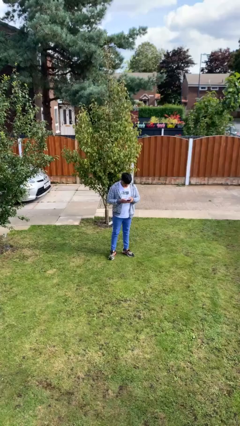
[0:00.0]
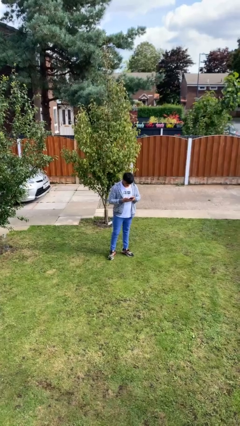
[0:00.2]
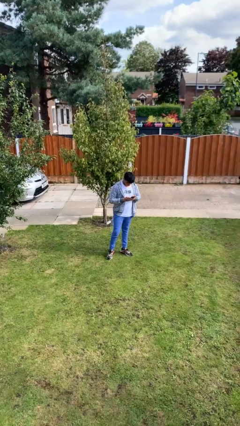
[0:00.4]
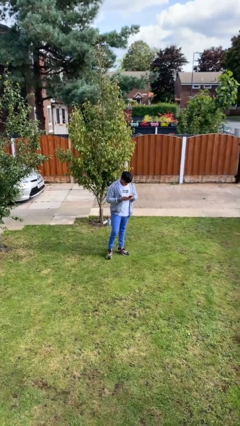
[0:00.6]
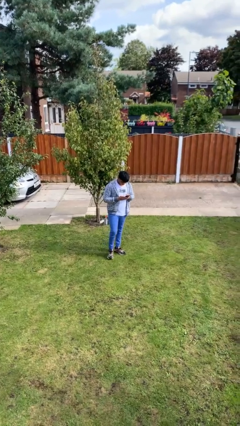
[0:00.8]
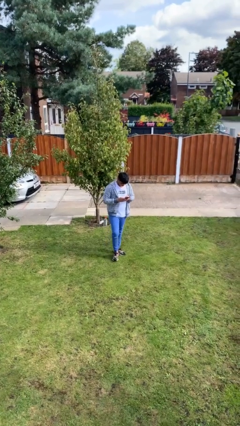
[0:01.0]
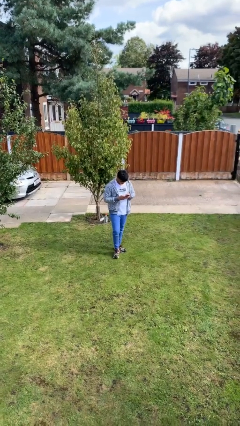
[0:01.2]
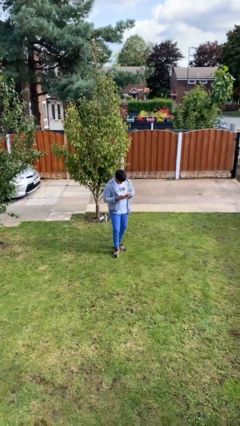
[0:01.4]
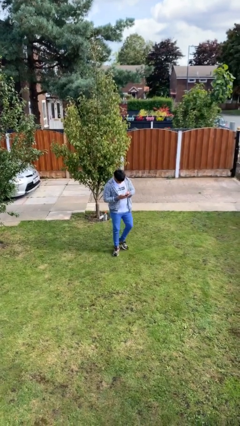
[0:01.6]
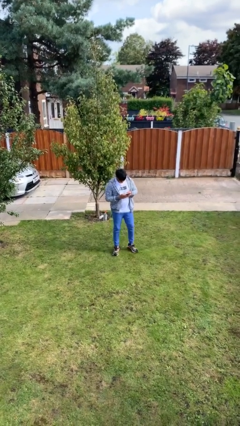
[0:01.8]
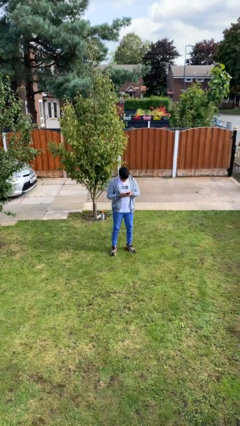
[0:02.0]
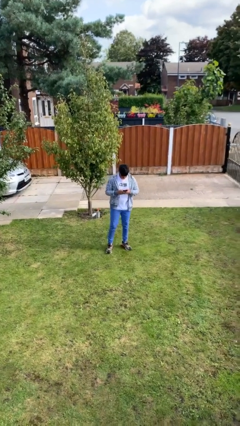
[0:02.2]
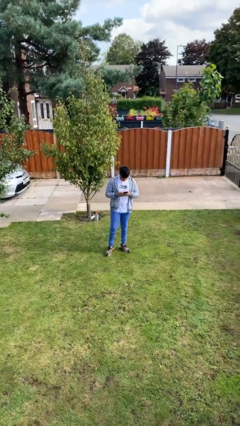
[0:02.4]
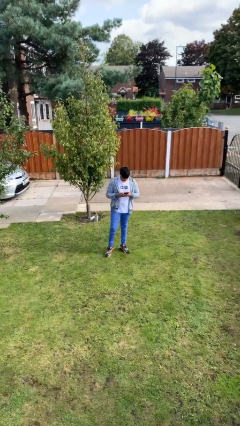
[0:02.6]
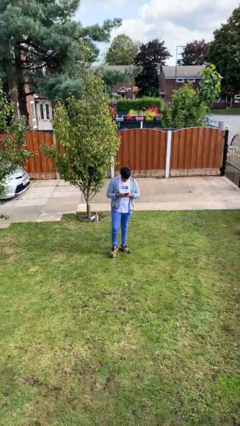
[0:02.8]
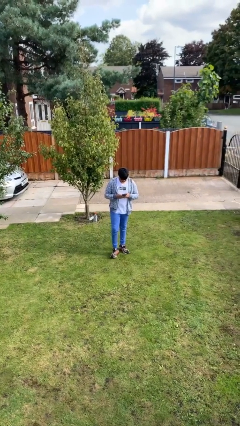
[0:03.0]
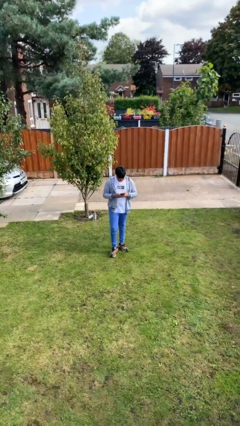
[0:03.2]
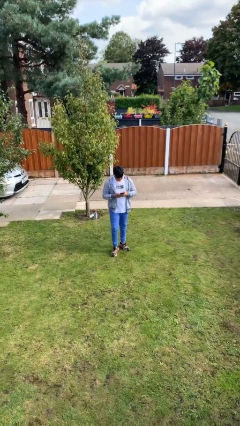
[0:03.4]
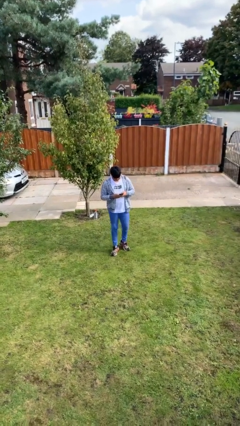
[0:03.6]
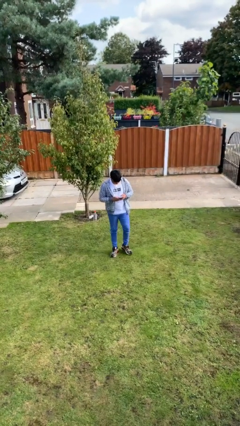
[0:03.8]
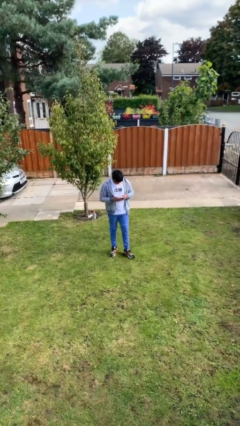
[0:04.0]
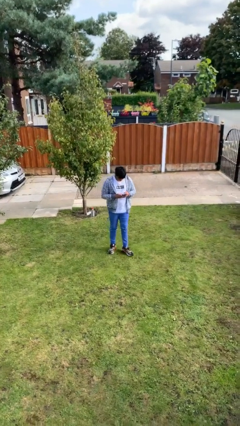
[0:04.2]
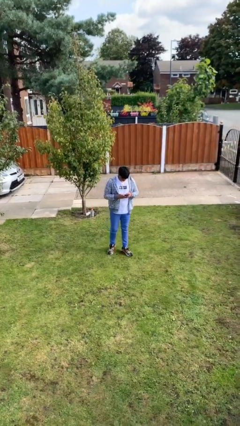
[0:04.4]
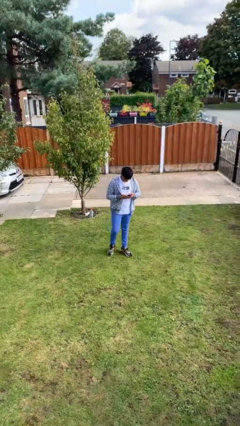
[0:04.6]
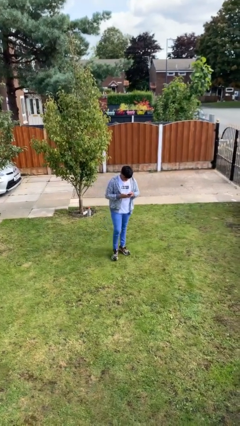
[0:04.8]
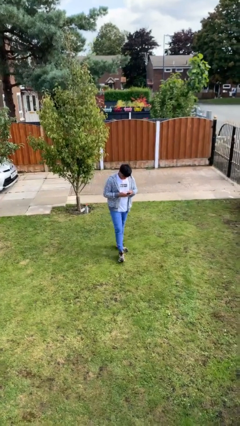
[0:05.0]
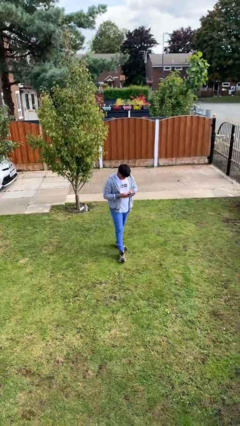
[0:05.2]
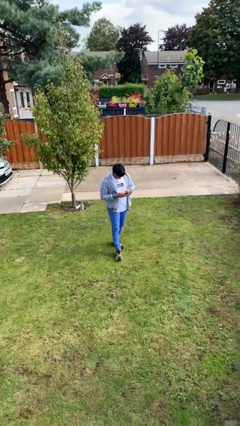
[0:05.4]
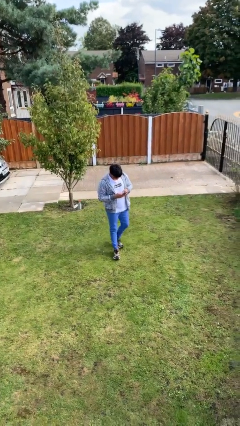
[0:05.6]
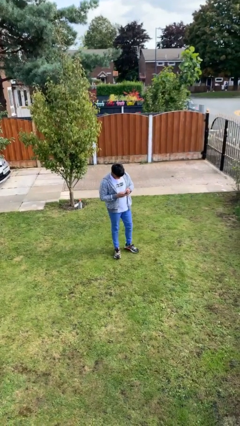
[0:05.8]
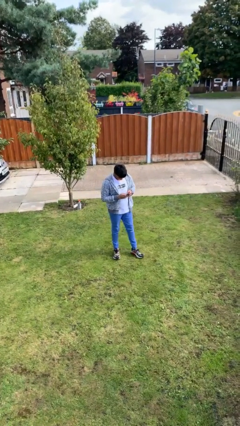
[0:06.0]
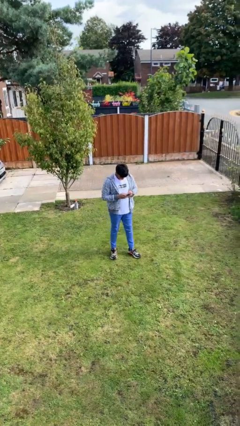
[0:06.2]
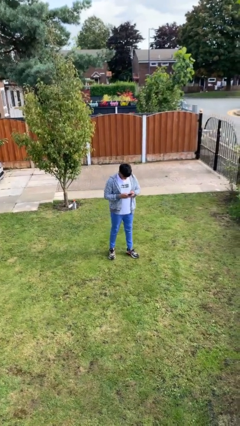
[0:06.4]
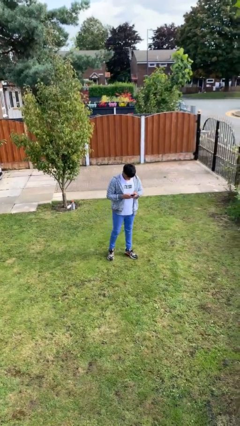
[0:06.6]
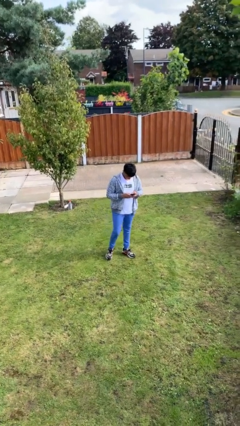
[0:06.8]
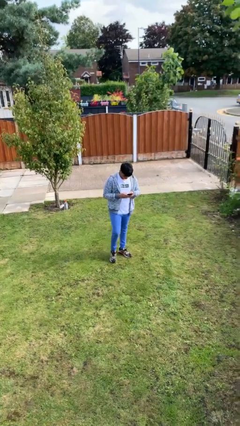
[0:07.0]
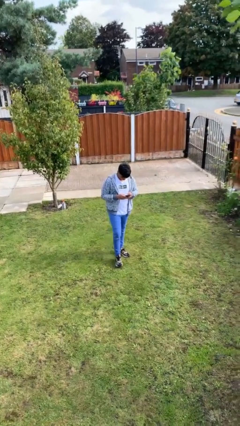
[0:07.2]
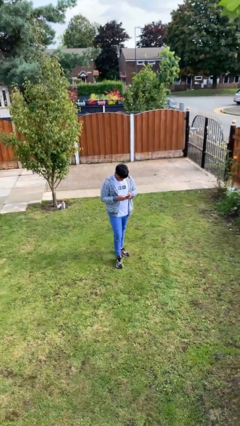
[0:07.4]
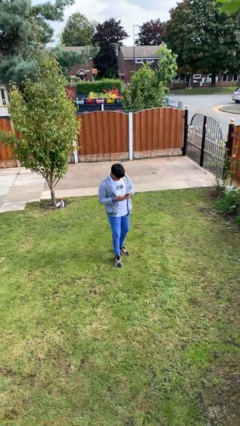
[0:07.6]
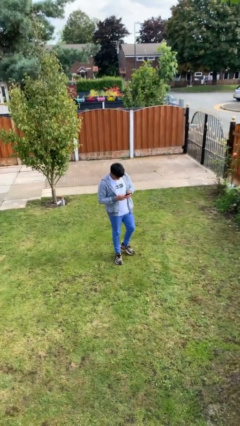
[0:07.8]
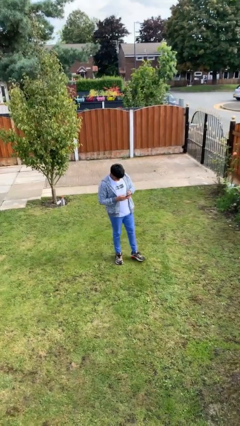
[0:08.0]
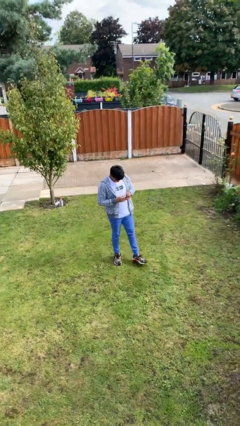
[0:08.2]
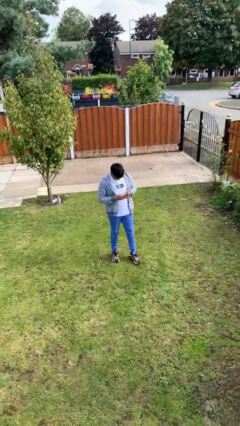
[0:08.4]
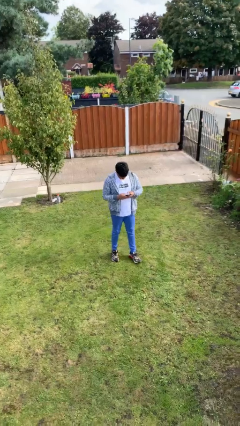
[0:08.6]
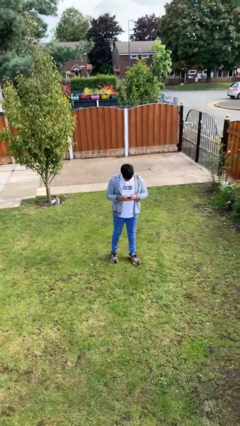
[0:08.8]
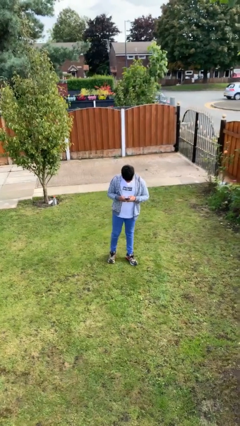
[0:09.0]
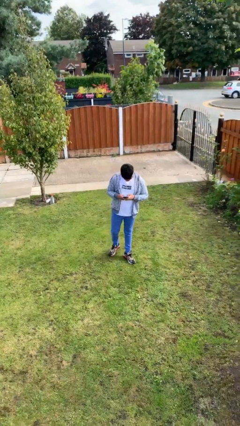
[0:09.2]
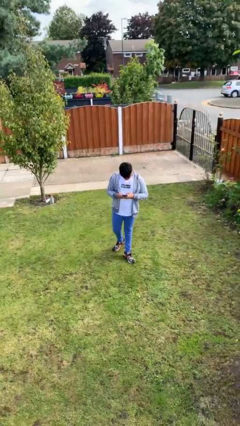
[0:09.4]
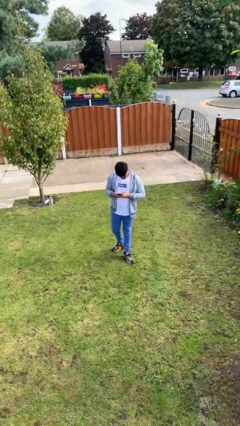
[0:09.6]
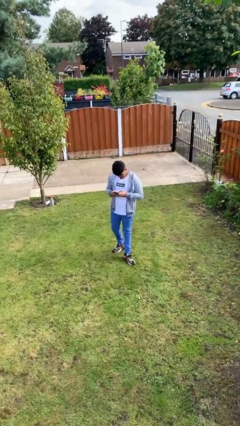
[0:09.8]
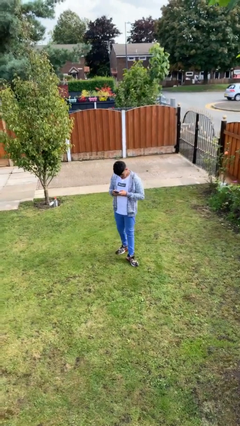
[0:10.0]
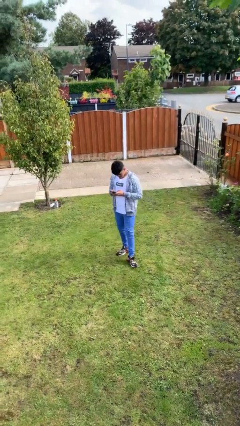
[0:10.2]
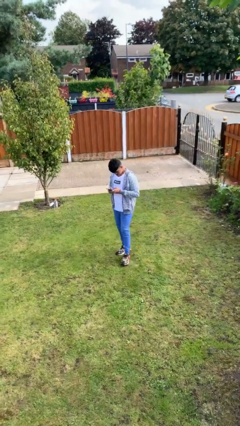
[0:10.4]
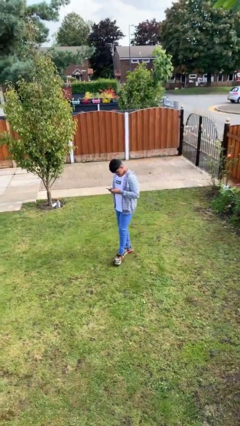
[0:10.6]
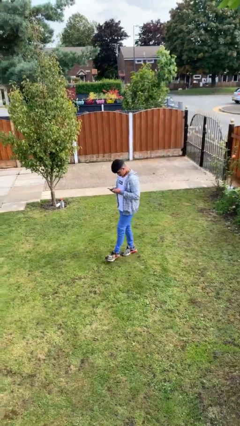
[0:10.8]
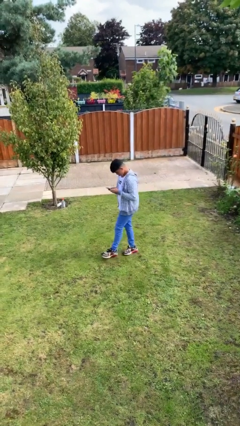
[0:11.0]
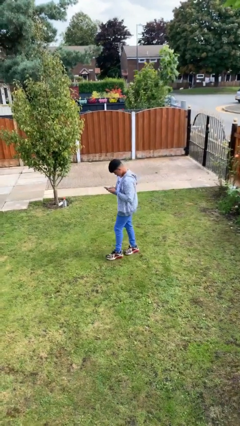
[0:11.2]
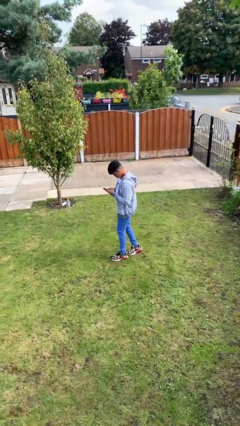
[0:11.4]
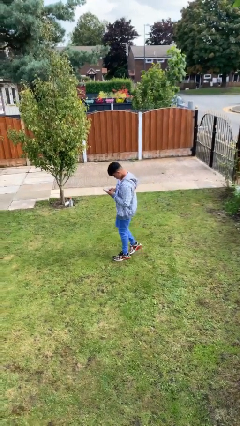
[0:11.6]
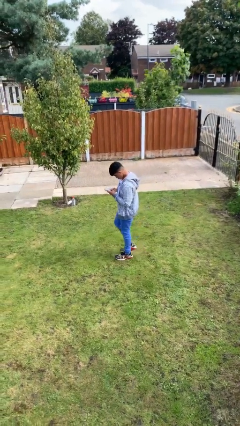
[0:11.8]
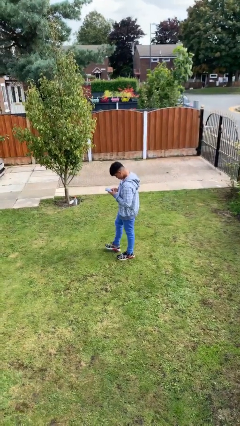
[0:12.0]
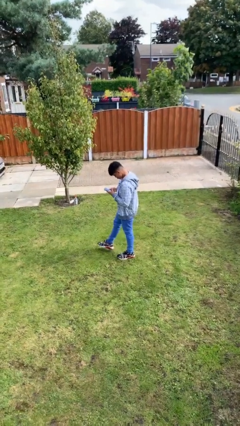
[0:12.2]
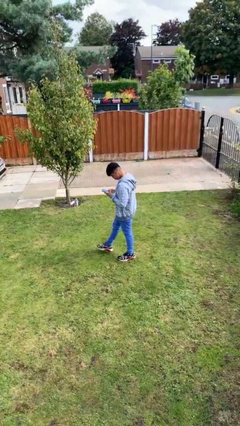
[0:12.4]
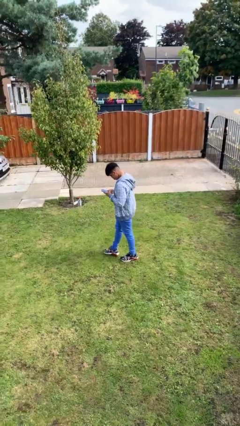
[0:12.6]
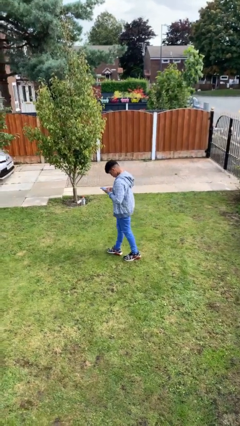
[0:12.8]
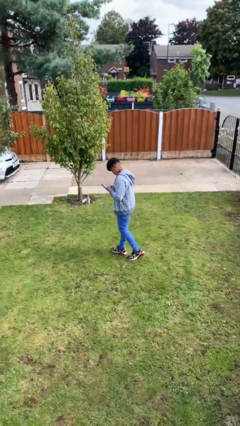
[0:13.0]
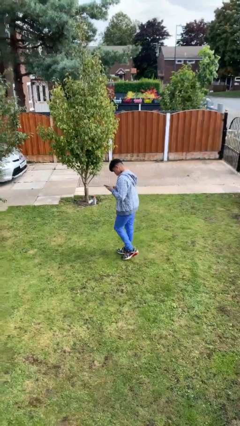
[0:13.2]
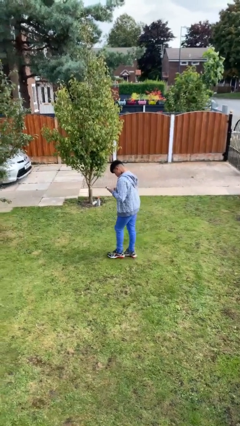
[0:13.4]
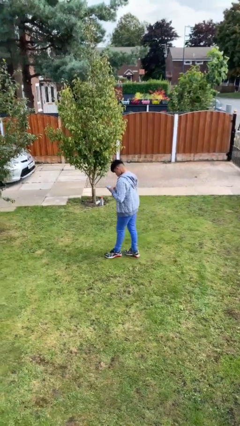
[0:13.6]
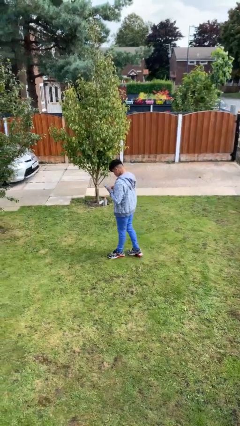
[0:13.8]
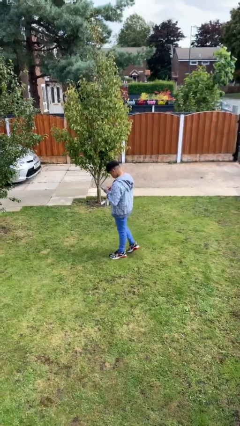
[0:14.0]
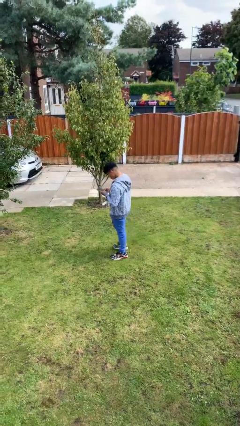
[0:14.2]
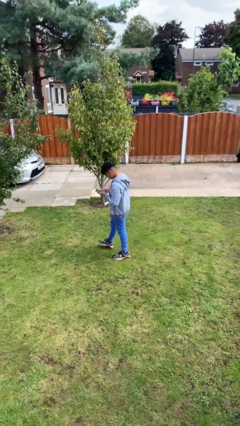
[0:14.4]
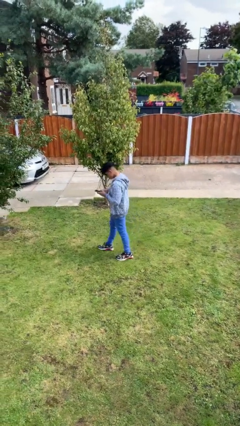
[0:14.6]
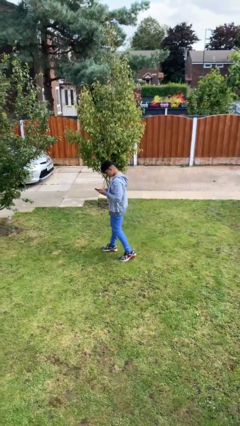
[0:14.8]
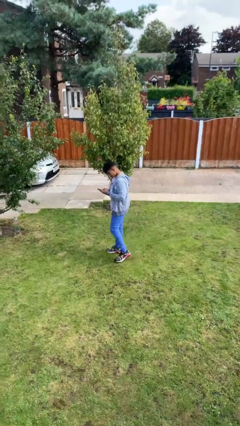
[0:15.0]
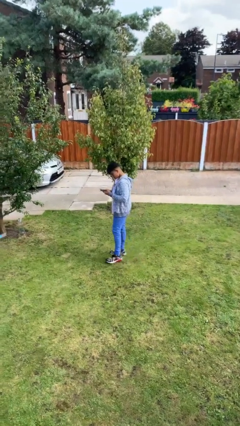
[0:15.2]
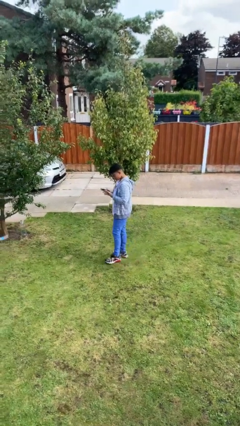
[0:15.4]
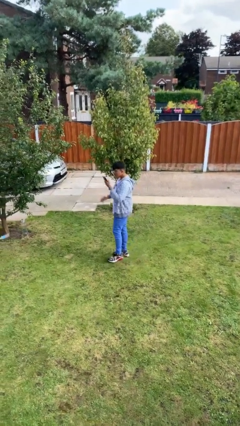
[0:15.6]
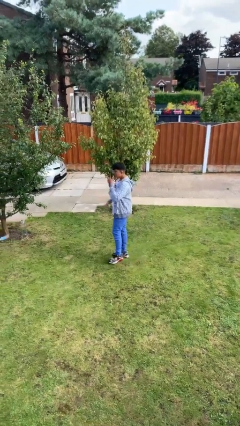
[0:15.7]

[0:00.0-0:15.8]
person texts on phone

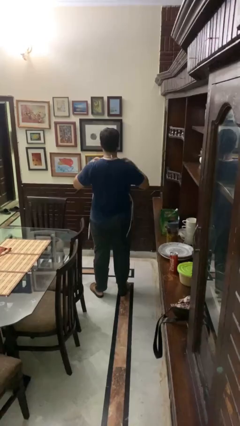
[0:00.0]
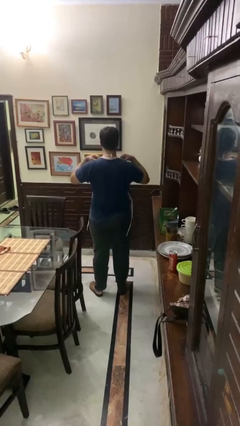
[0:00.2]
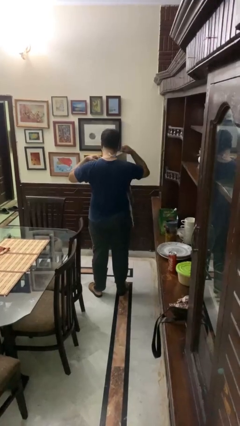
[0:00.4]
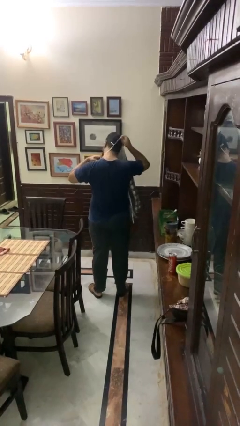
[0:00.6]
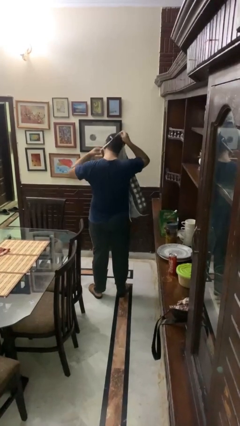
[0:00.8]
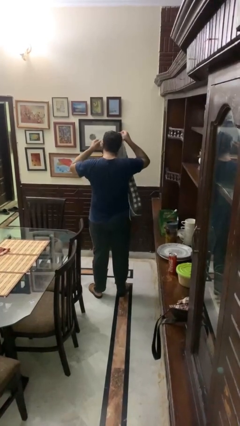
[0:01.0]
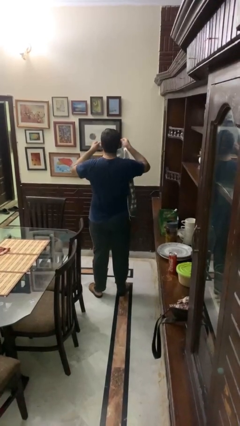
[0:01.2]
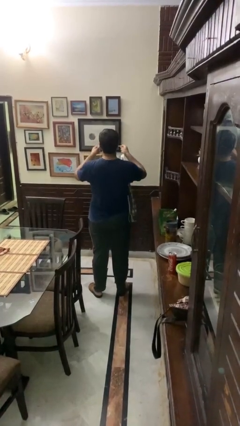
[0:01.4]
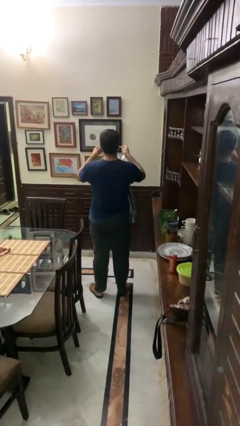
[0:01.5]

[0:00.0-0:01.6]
person takes off apron

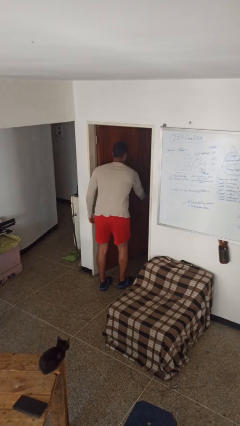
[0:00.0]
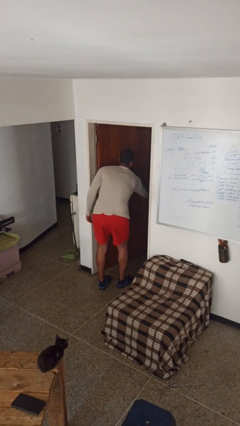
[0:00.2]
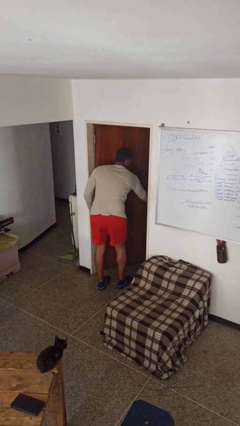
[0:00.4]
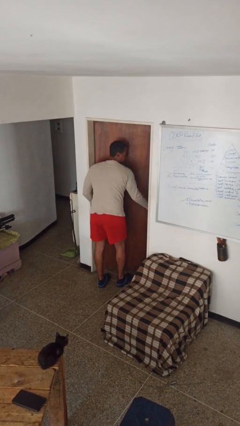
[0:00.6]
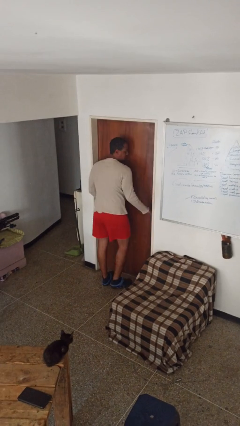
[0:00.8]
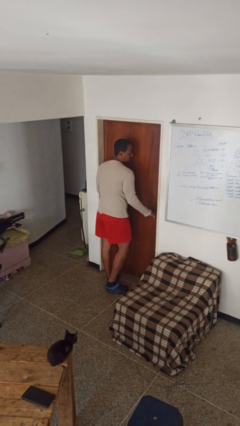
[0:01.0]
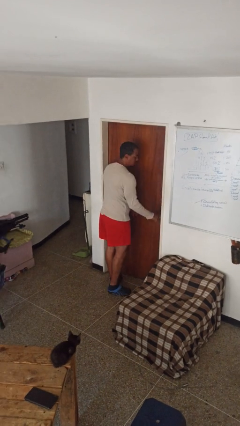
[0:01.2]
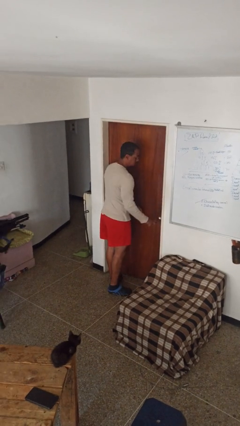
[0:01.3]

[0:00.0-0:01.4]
person closes facility door
